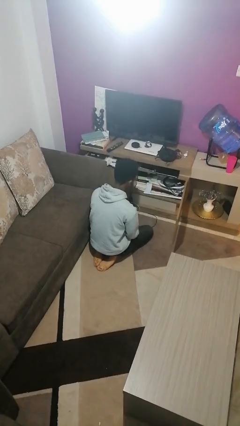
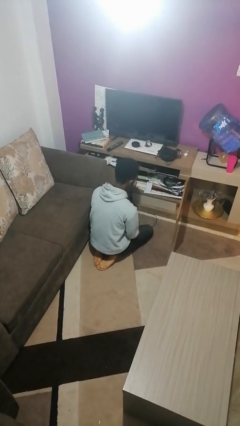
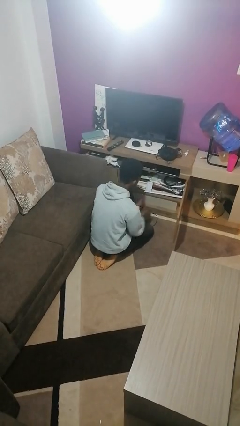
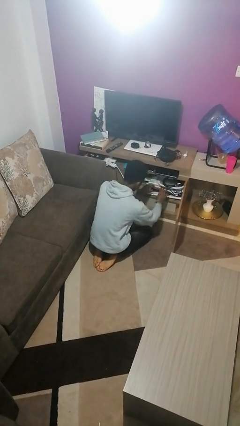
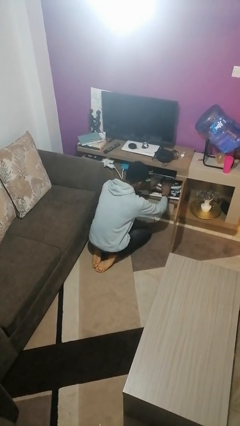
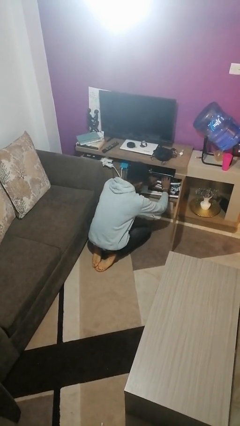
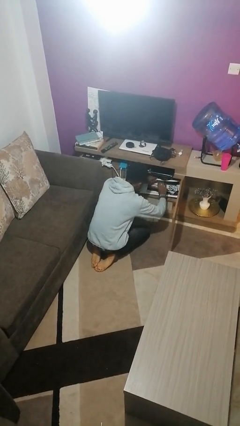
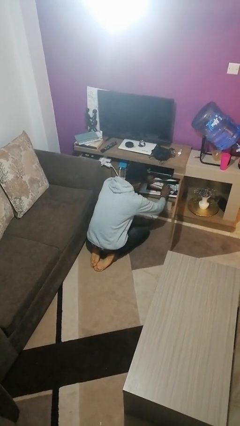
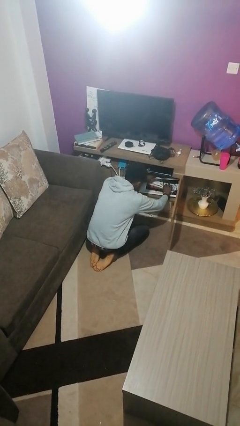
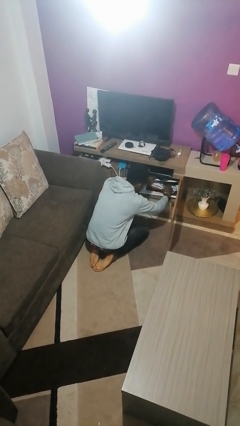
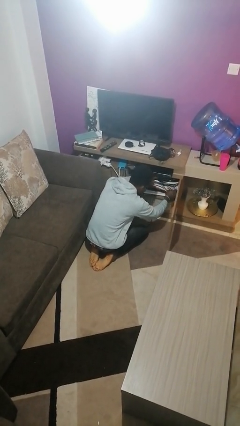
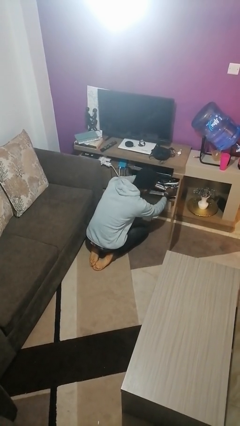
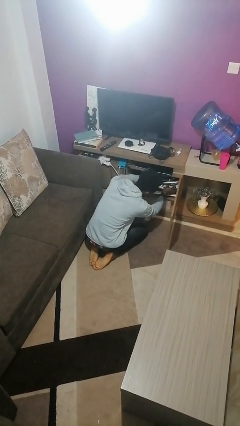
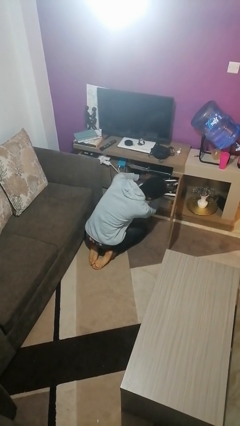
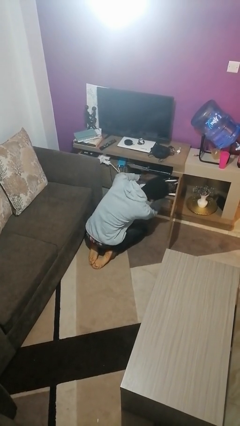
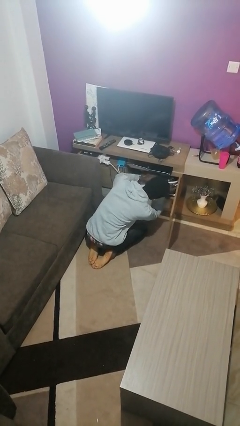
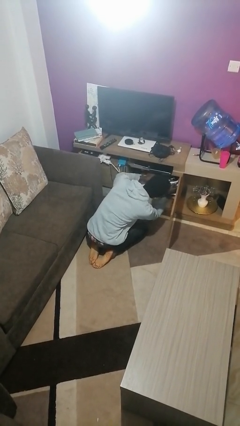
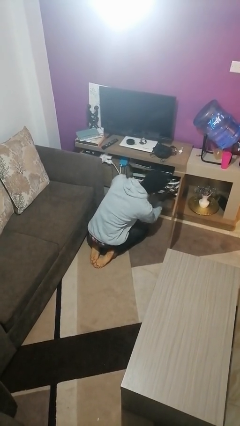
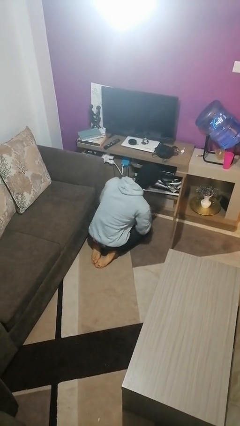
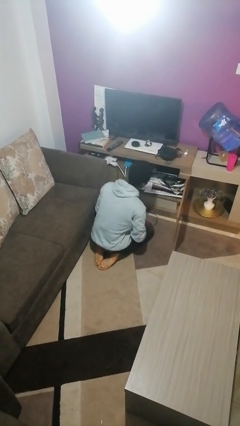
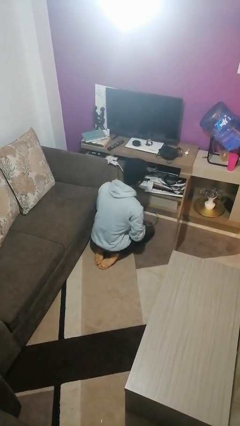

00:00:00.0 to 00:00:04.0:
person searches in cabinet

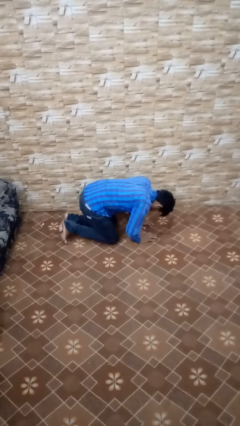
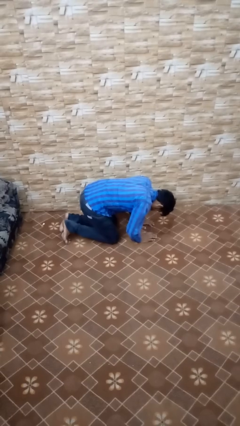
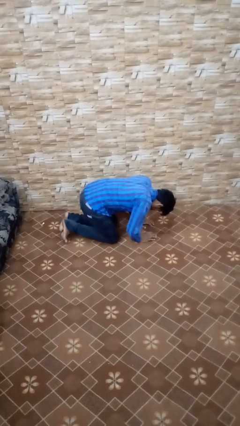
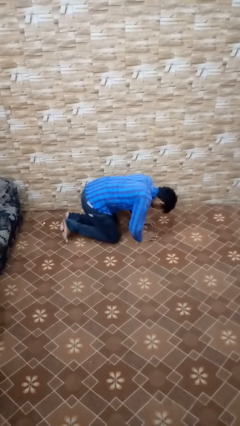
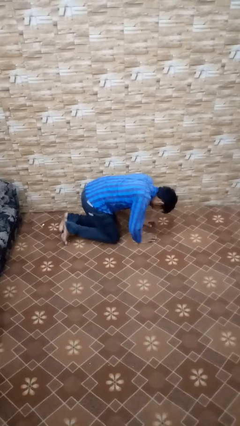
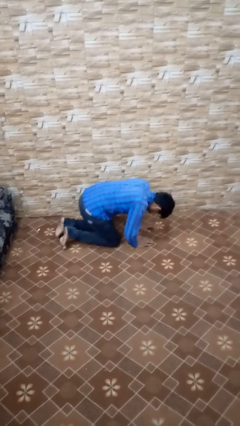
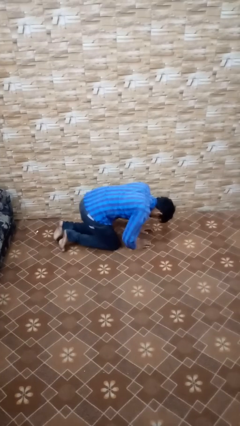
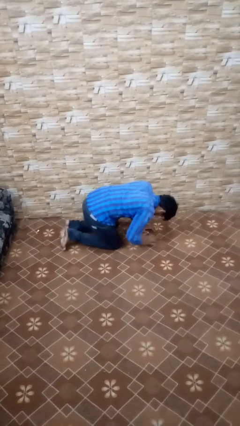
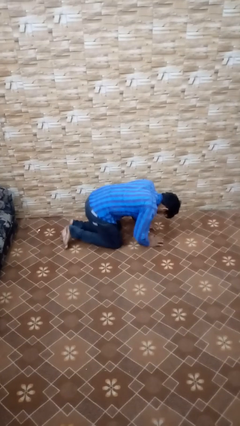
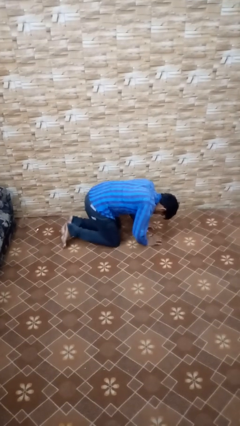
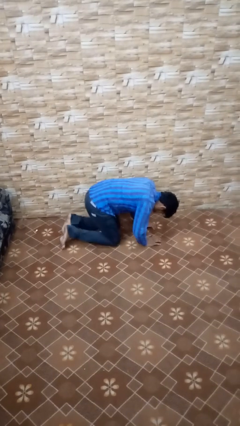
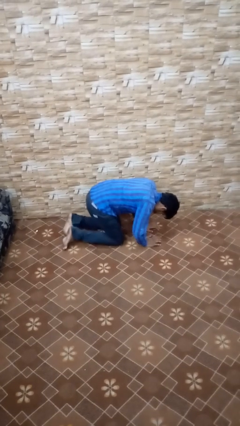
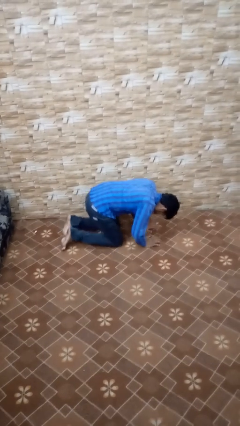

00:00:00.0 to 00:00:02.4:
person crawls

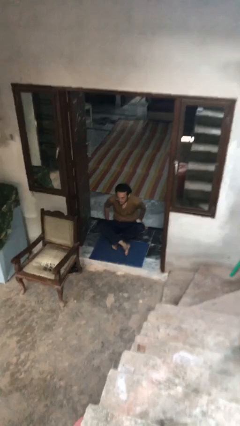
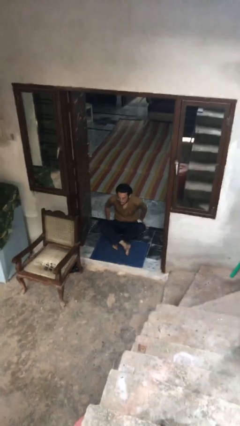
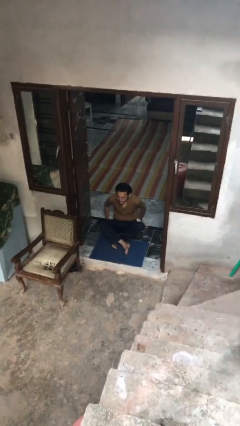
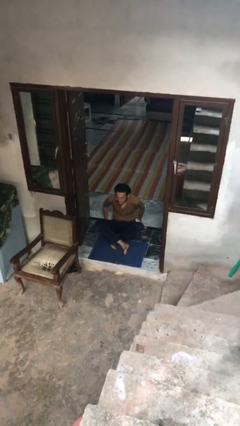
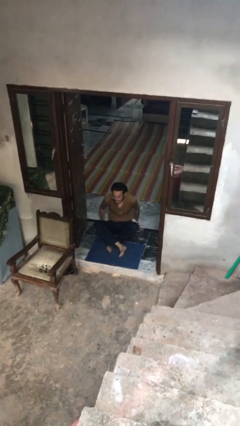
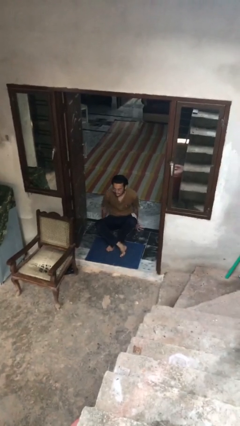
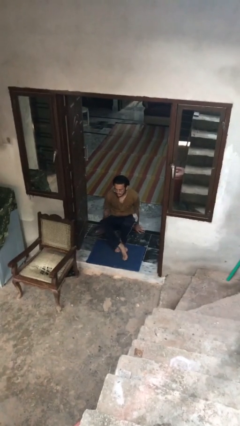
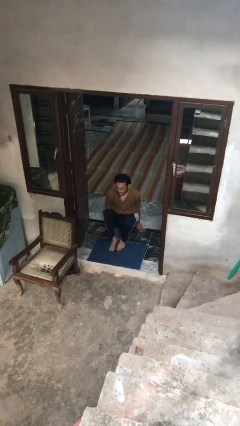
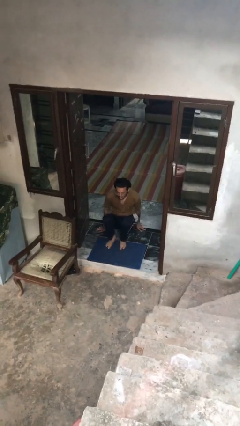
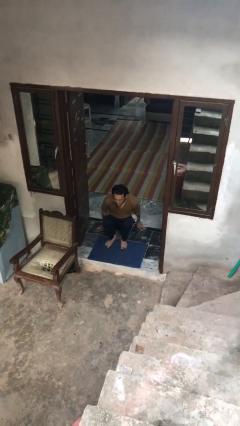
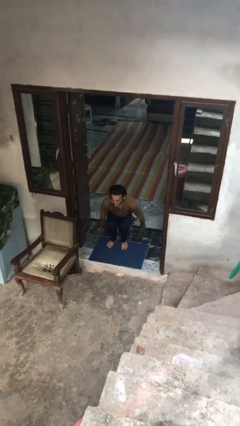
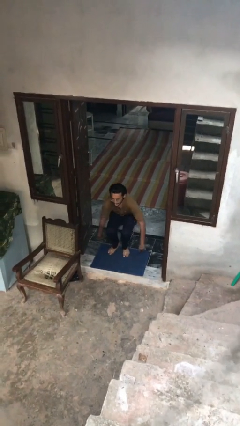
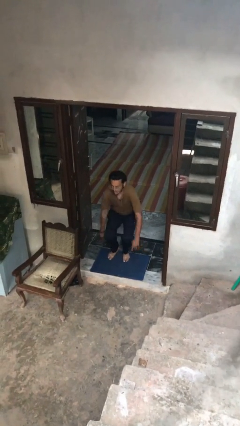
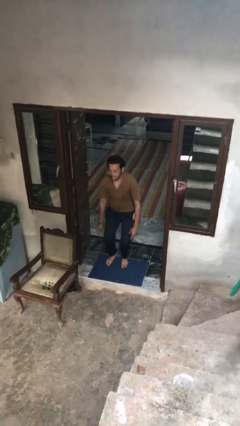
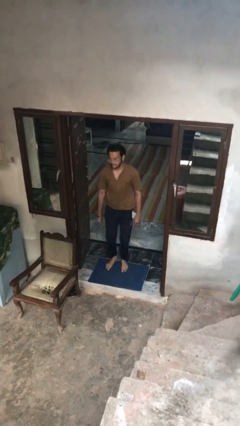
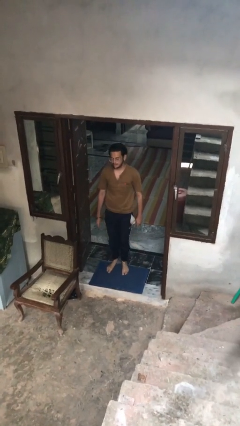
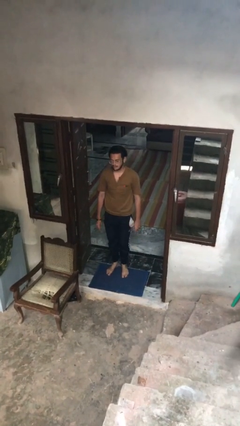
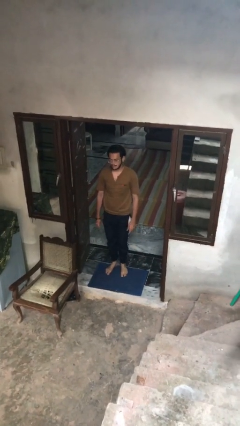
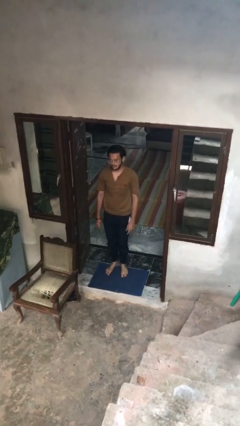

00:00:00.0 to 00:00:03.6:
person stands up from floor

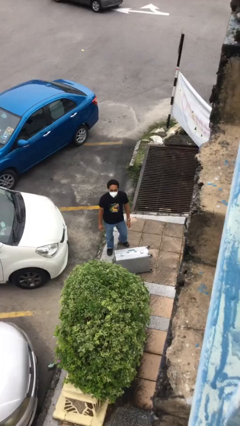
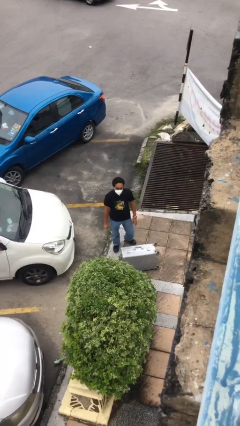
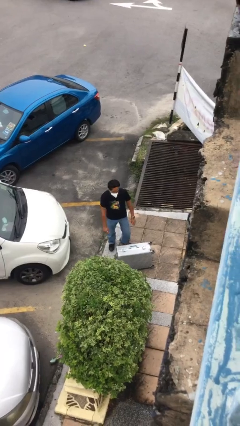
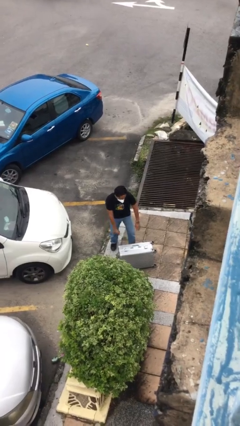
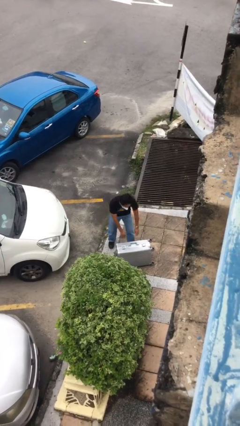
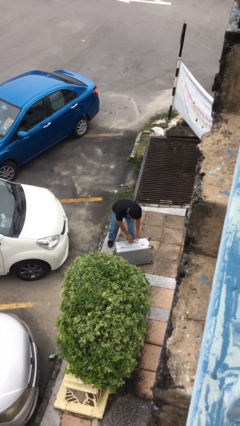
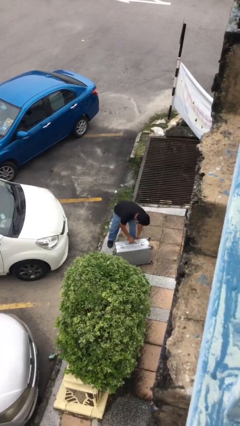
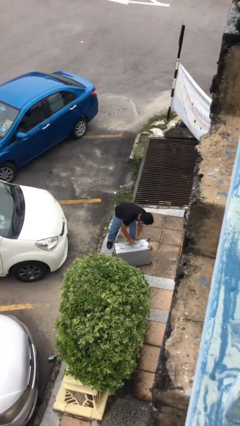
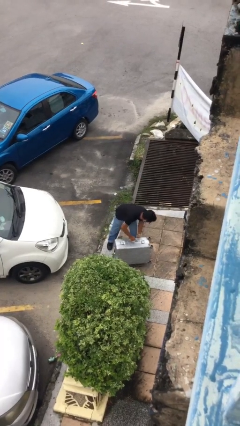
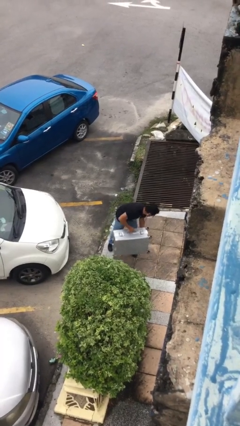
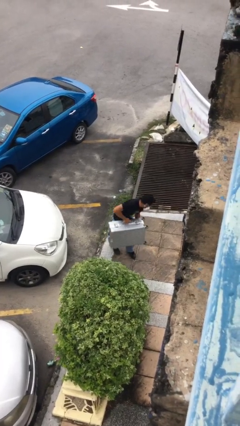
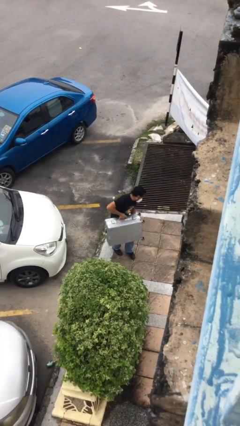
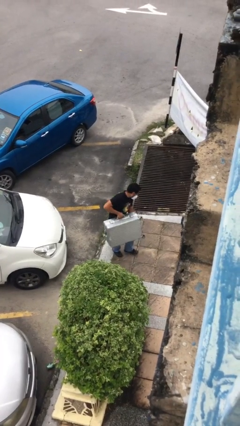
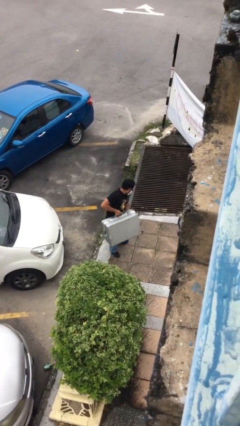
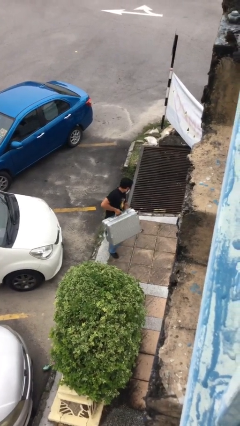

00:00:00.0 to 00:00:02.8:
person picks up object from floor

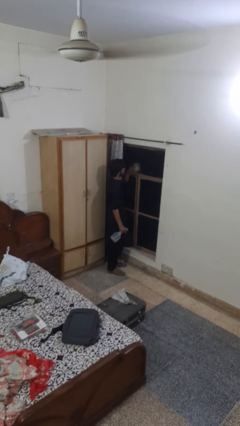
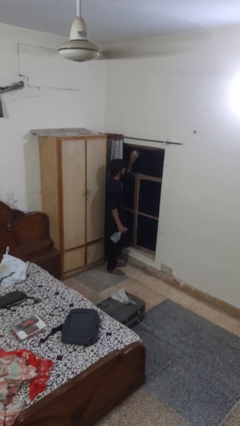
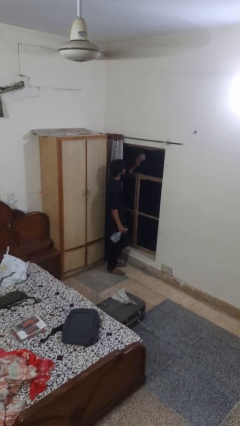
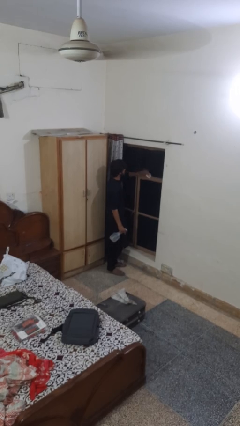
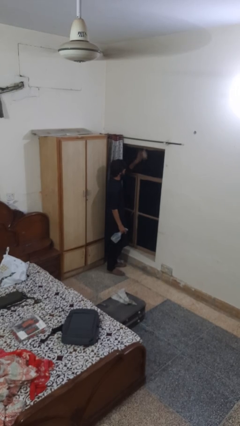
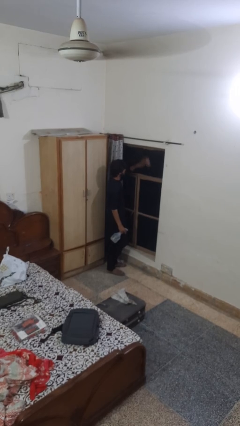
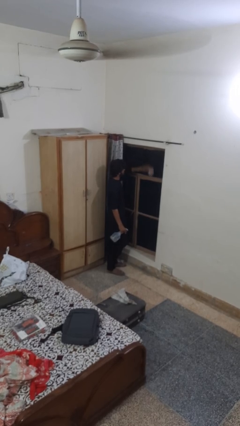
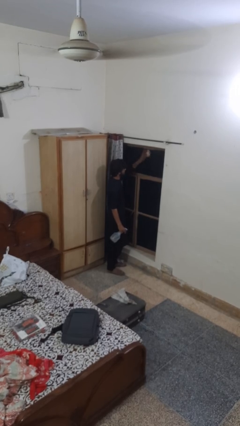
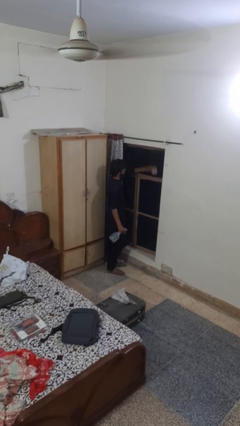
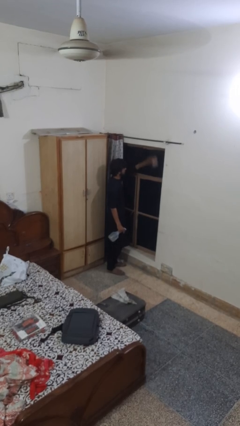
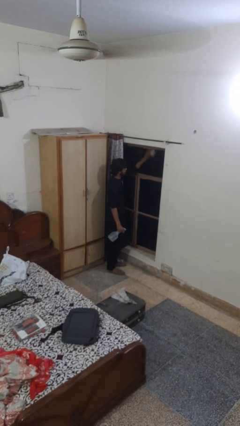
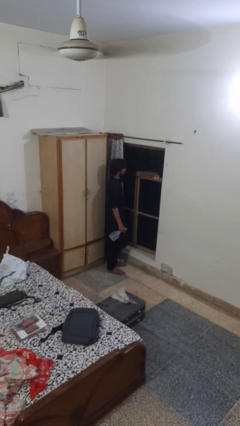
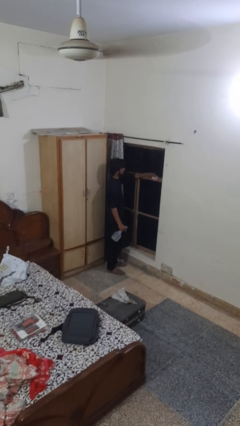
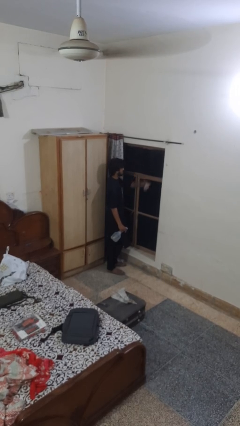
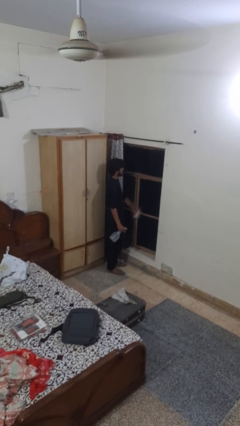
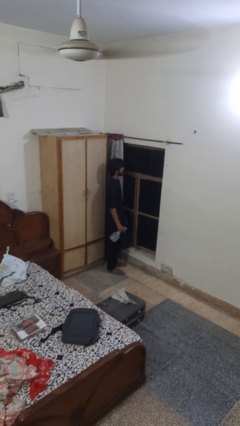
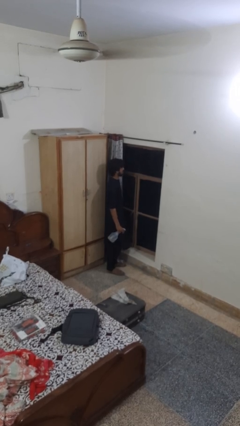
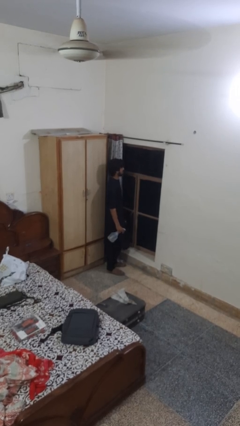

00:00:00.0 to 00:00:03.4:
person washes window

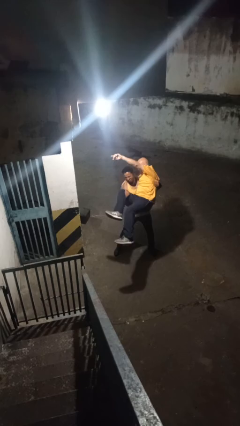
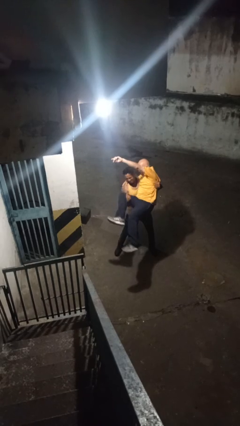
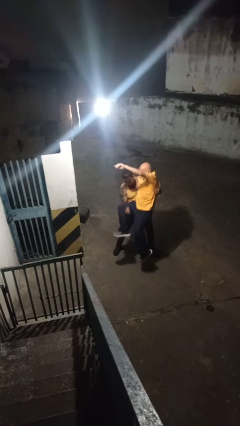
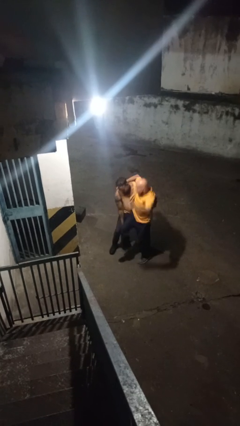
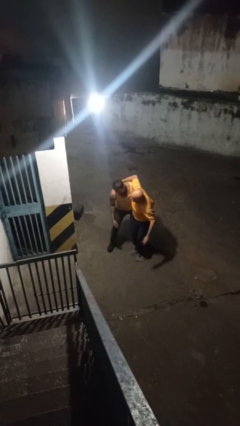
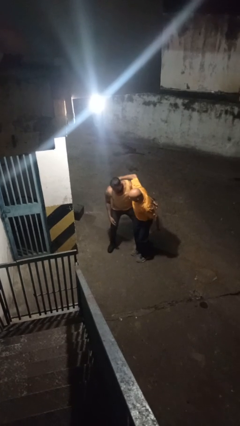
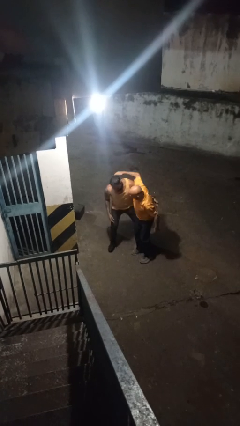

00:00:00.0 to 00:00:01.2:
person puts down person
